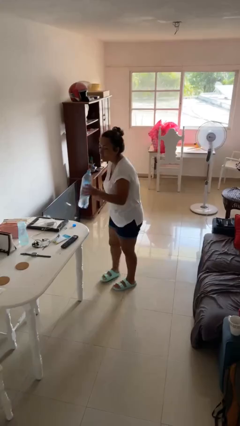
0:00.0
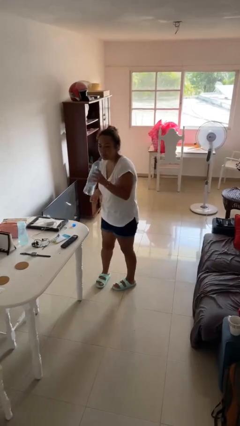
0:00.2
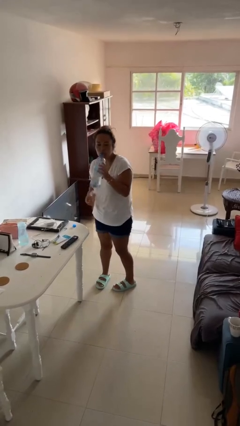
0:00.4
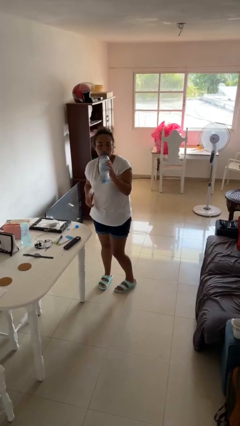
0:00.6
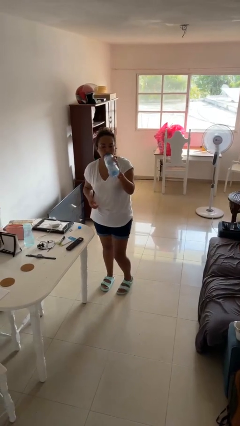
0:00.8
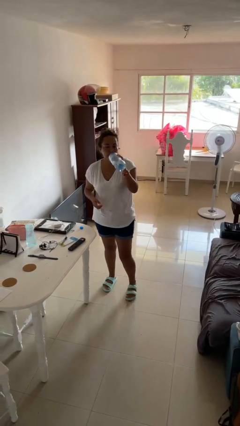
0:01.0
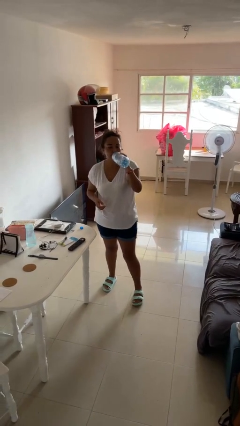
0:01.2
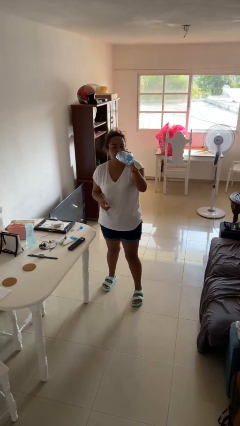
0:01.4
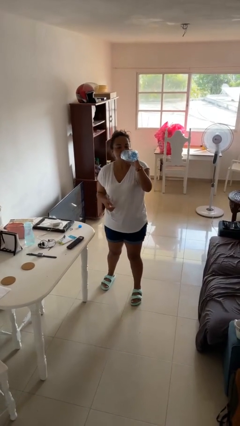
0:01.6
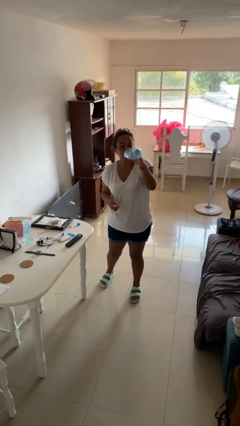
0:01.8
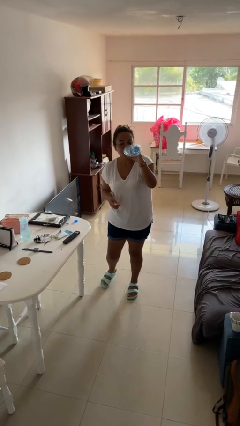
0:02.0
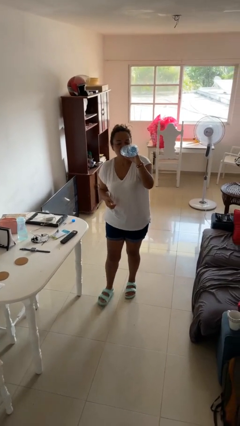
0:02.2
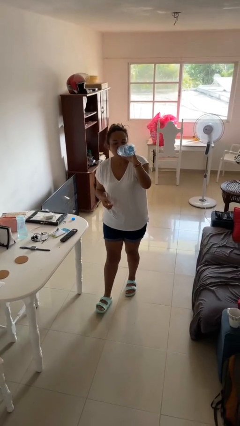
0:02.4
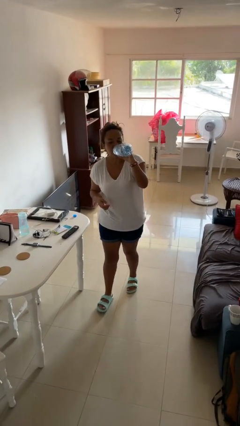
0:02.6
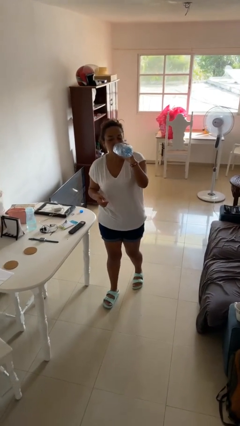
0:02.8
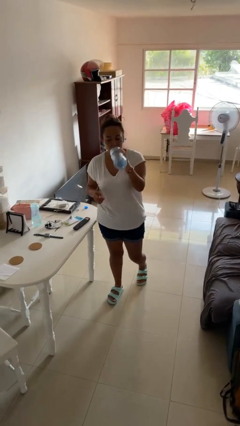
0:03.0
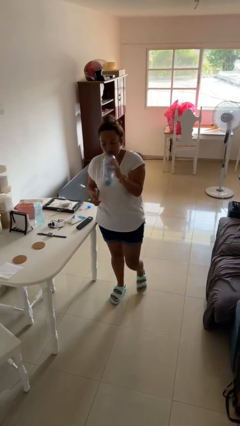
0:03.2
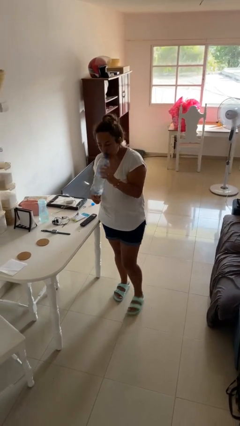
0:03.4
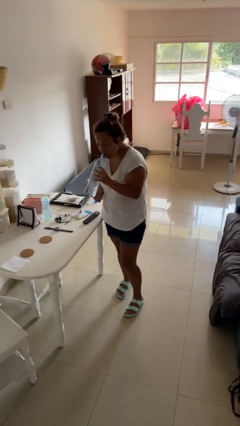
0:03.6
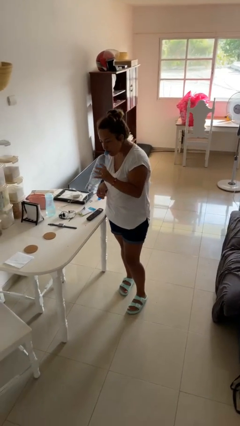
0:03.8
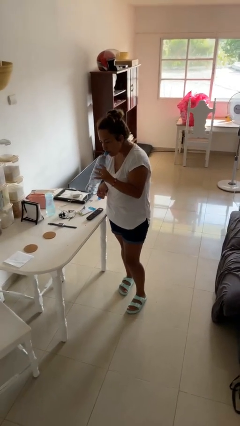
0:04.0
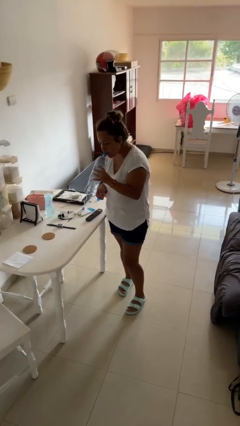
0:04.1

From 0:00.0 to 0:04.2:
person drinks from bottle

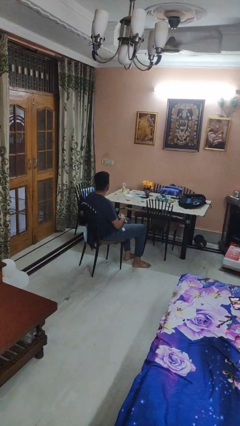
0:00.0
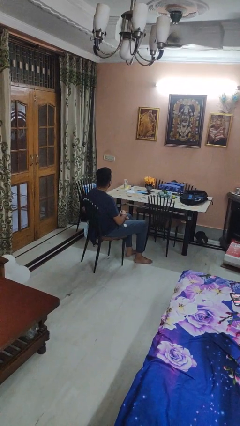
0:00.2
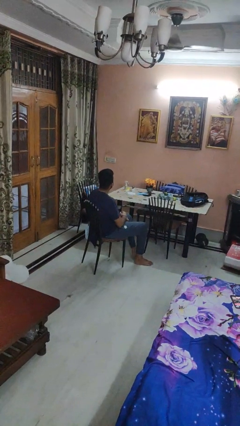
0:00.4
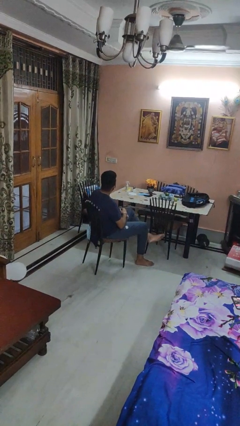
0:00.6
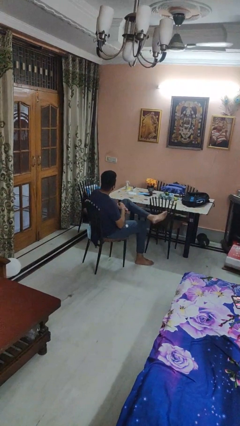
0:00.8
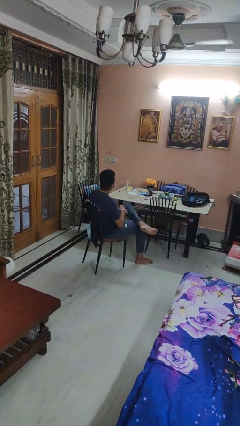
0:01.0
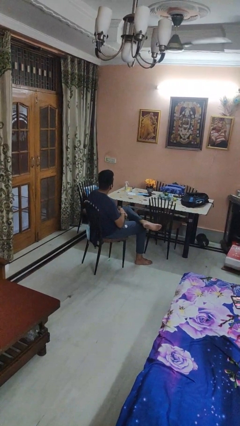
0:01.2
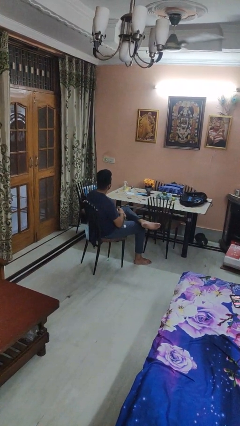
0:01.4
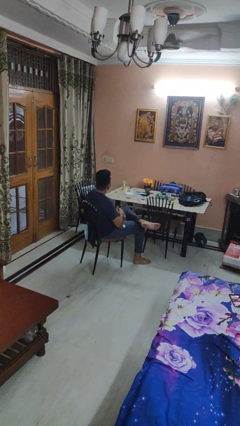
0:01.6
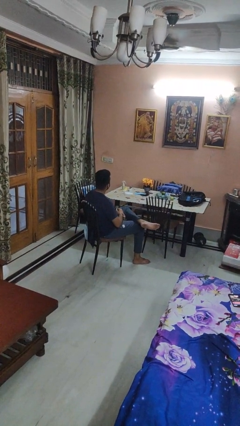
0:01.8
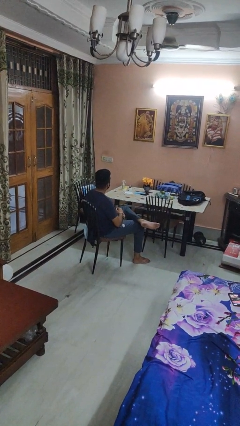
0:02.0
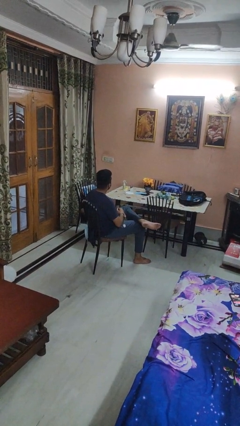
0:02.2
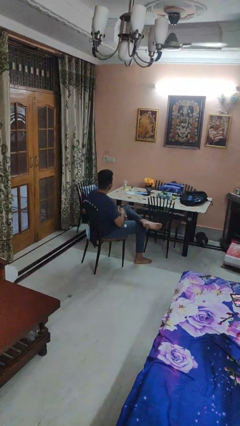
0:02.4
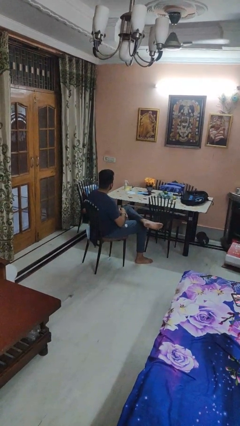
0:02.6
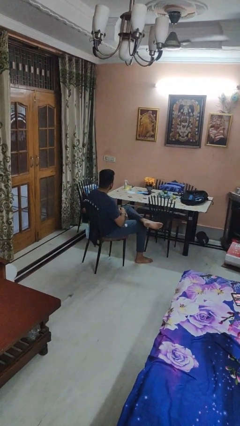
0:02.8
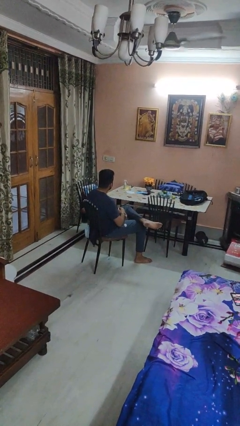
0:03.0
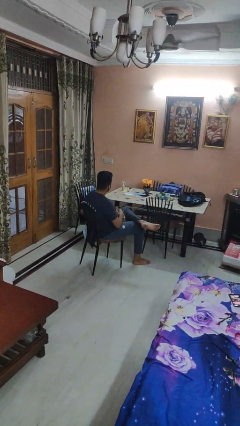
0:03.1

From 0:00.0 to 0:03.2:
person crosses legs

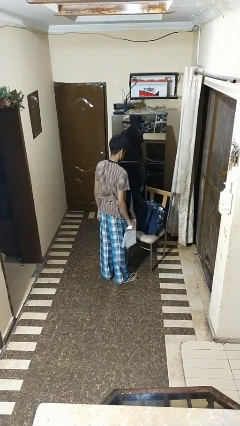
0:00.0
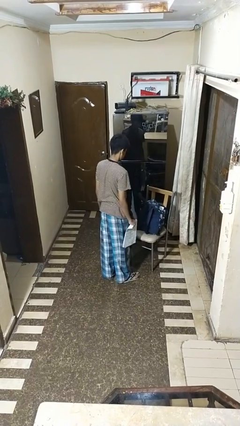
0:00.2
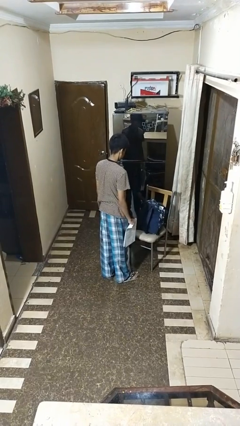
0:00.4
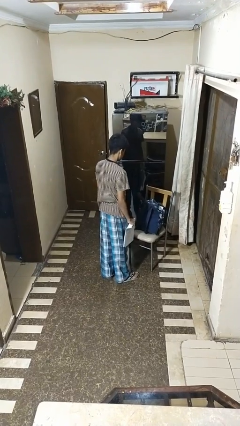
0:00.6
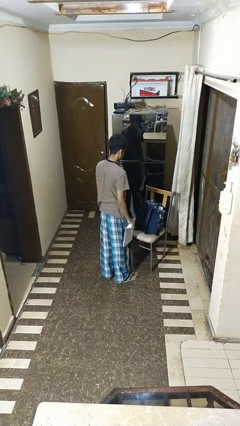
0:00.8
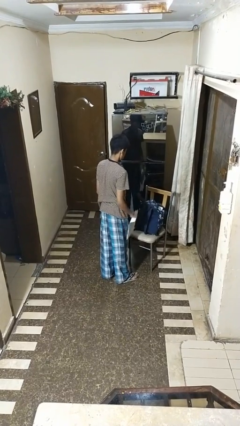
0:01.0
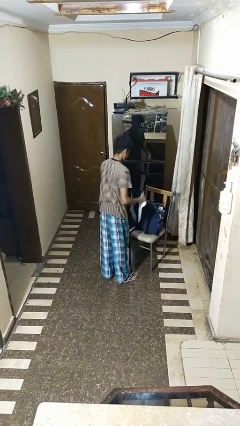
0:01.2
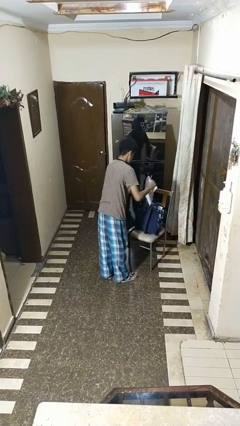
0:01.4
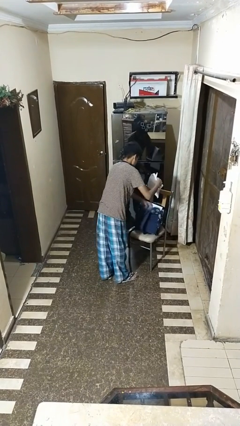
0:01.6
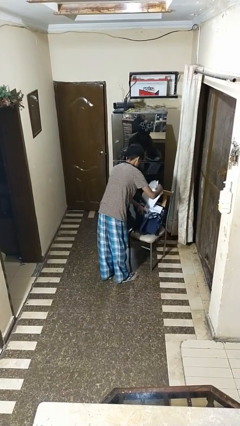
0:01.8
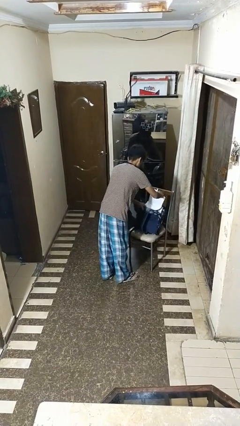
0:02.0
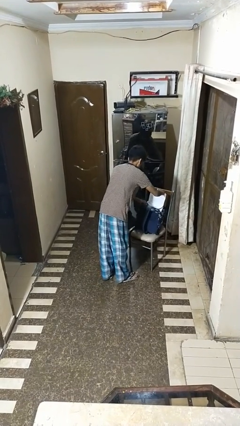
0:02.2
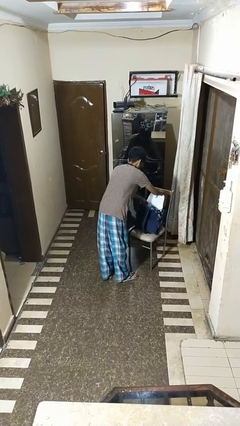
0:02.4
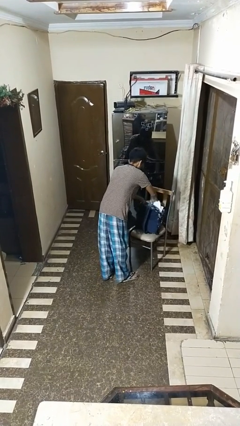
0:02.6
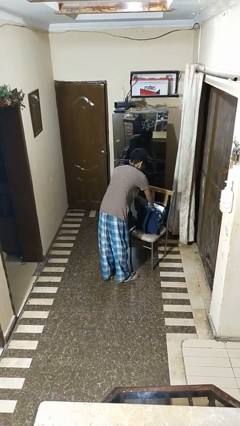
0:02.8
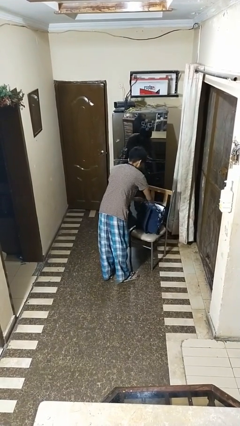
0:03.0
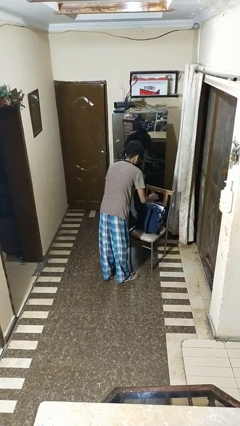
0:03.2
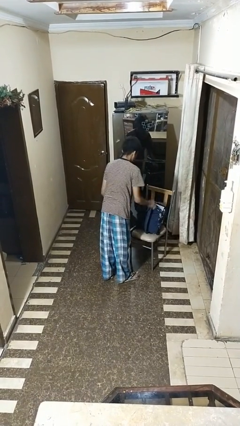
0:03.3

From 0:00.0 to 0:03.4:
person puts object into bag

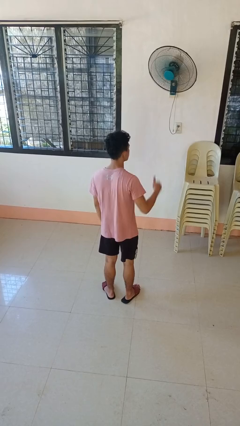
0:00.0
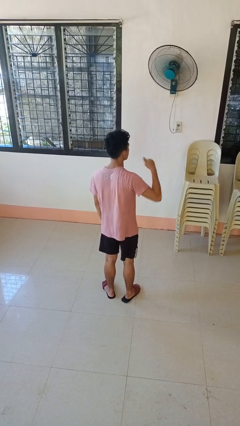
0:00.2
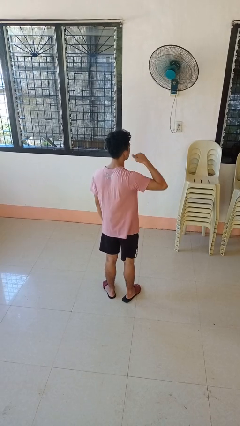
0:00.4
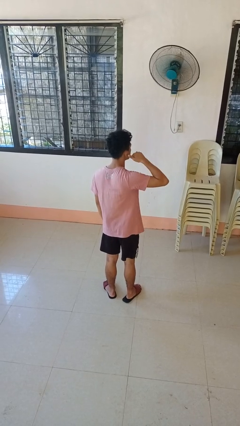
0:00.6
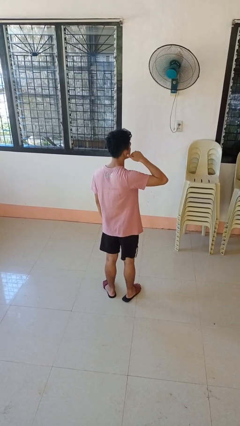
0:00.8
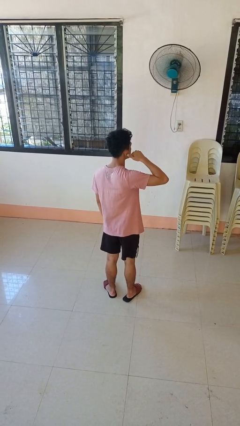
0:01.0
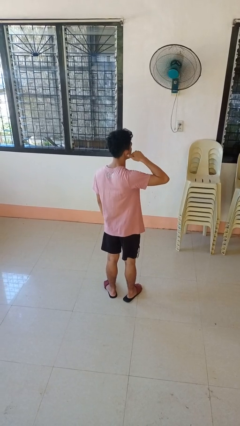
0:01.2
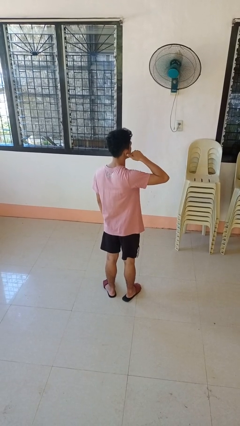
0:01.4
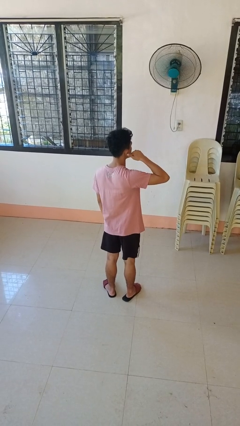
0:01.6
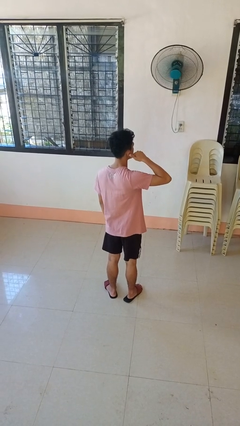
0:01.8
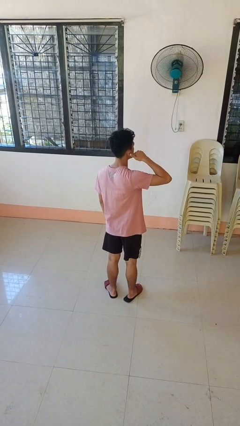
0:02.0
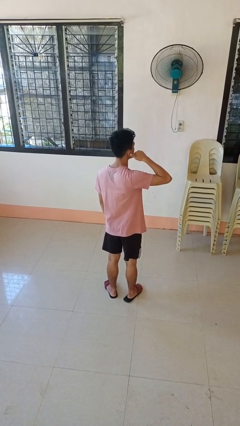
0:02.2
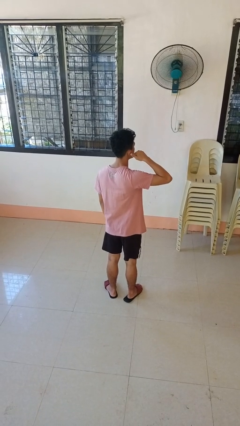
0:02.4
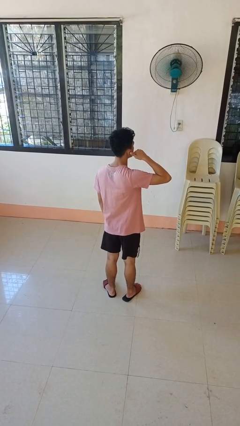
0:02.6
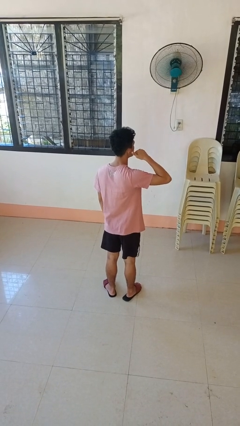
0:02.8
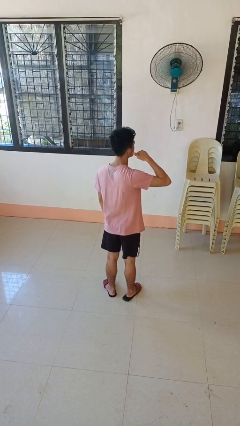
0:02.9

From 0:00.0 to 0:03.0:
person gestures call me

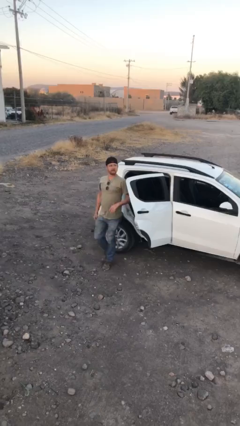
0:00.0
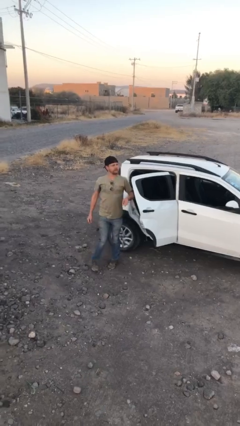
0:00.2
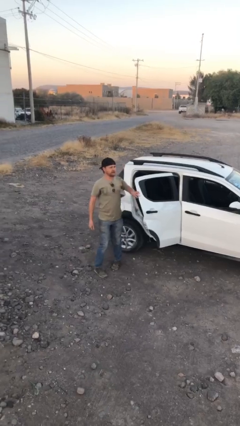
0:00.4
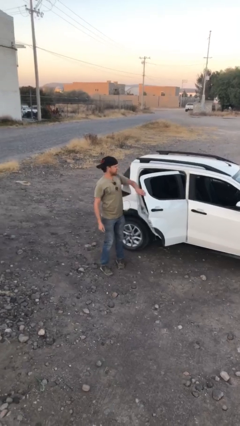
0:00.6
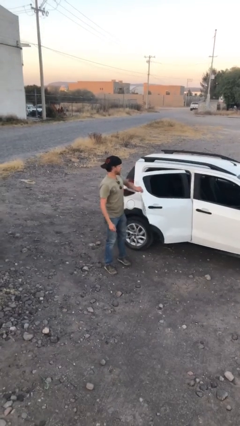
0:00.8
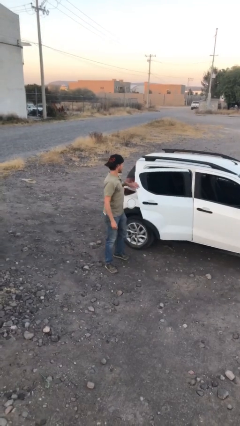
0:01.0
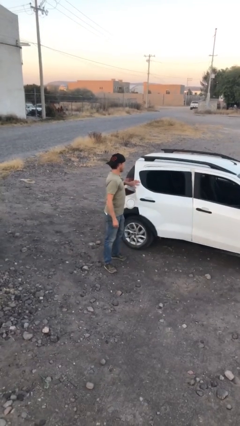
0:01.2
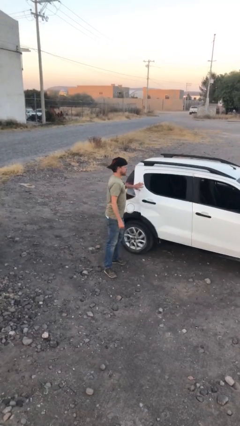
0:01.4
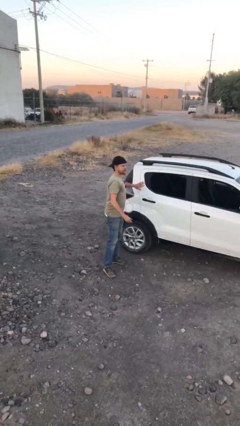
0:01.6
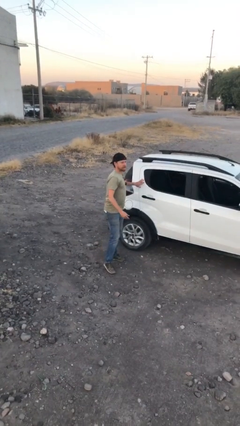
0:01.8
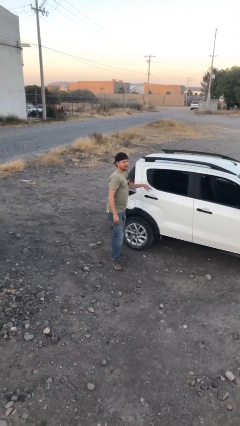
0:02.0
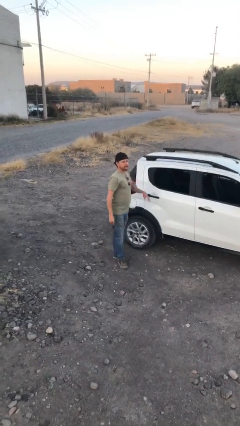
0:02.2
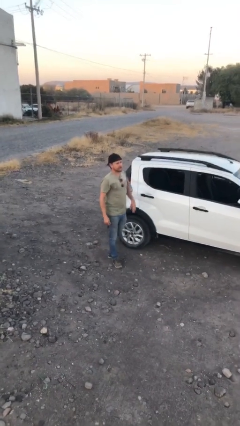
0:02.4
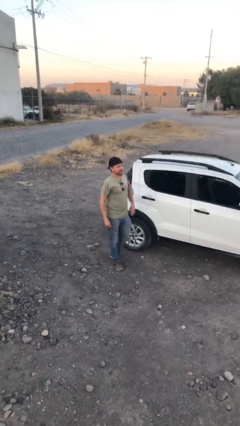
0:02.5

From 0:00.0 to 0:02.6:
person closes car door

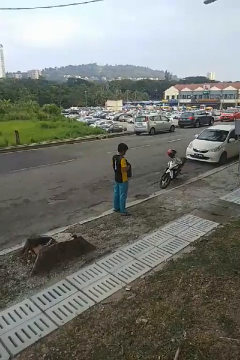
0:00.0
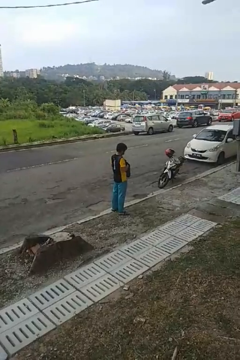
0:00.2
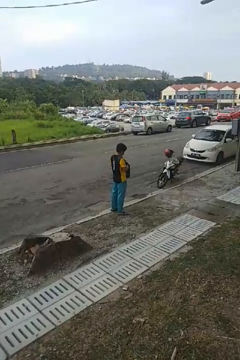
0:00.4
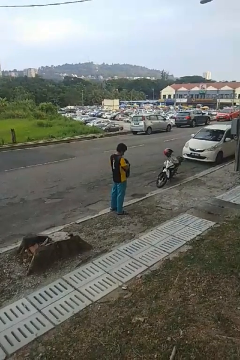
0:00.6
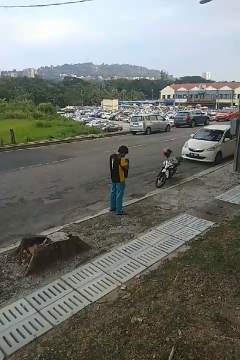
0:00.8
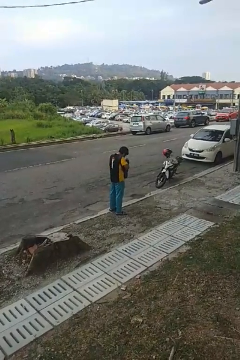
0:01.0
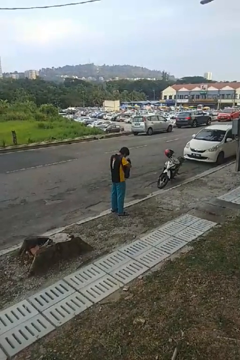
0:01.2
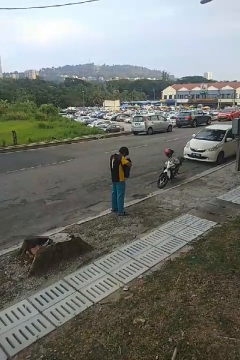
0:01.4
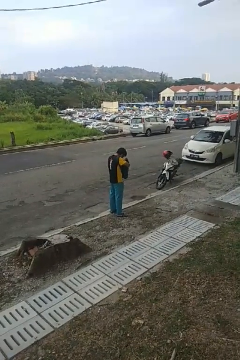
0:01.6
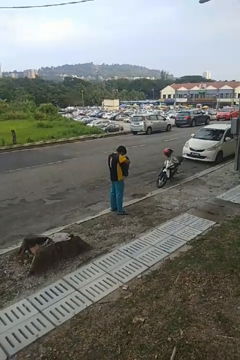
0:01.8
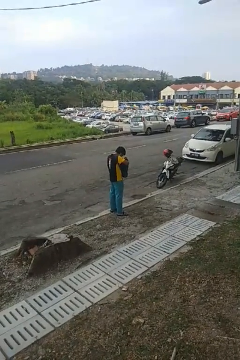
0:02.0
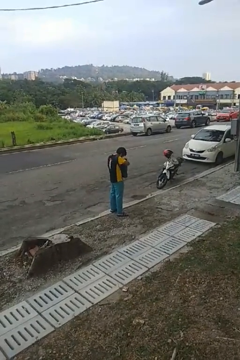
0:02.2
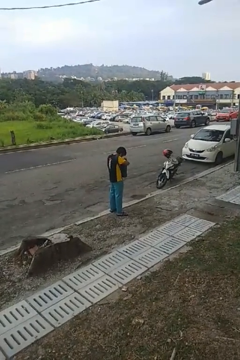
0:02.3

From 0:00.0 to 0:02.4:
person searches in backpack
